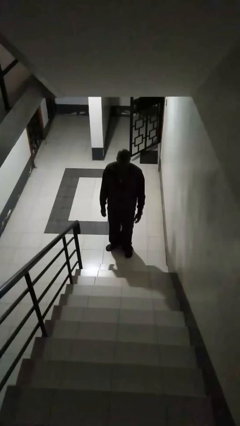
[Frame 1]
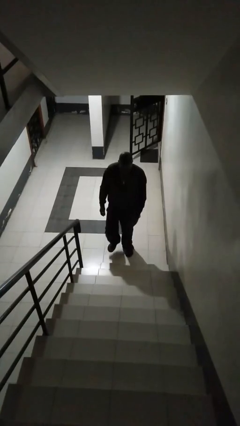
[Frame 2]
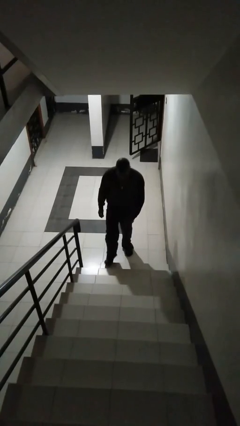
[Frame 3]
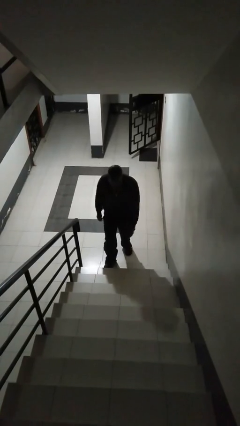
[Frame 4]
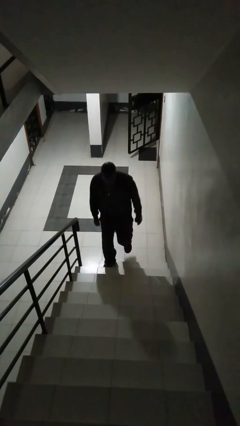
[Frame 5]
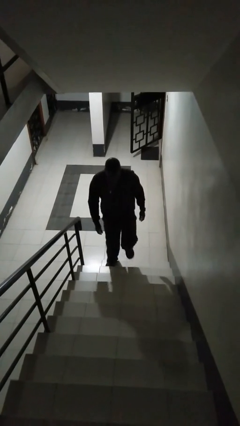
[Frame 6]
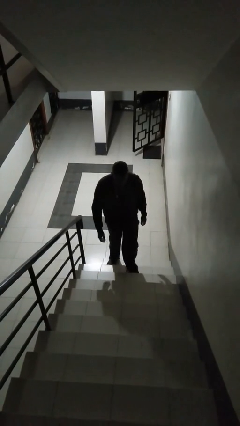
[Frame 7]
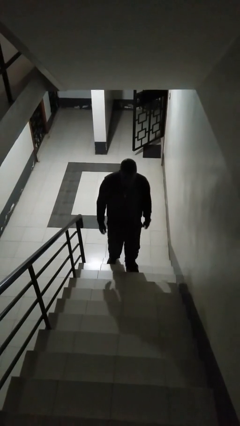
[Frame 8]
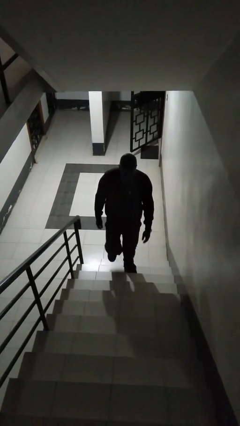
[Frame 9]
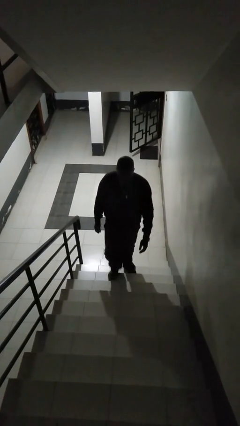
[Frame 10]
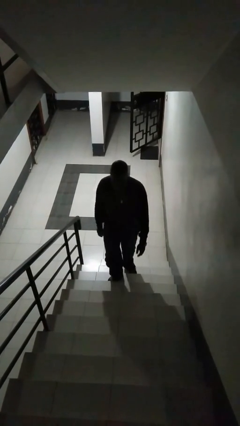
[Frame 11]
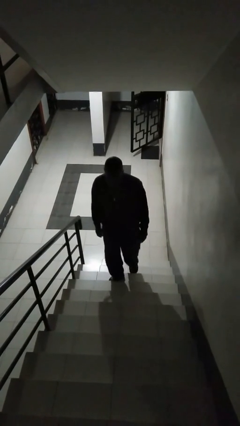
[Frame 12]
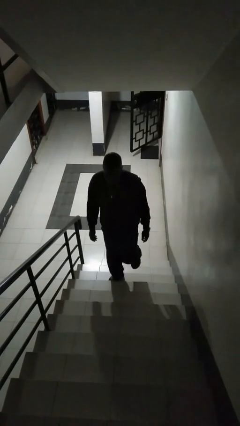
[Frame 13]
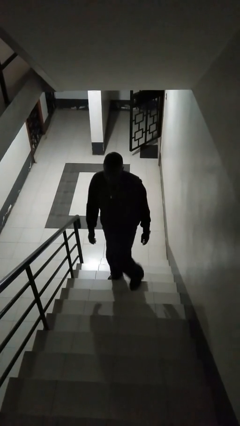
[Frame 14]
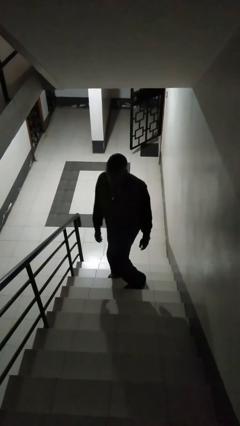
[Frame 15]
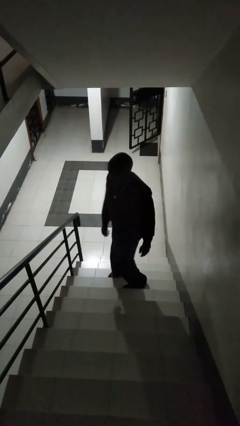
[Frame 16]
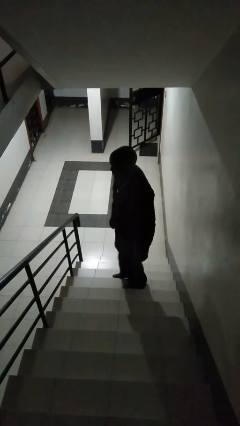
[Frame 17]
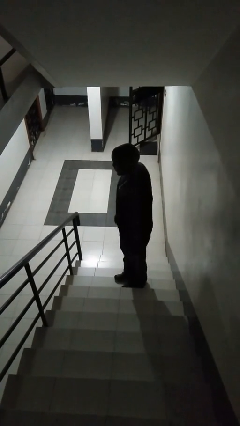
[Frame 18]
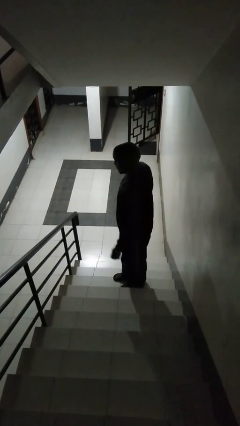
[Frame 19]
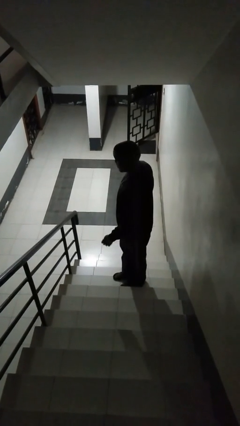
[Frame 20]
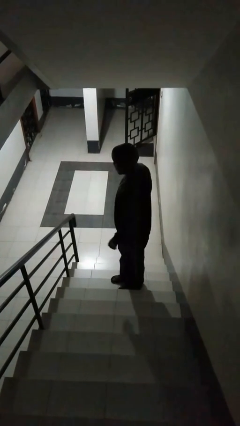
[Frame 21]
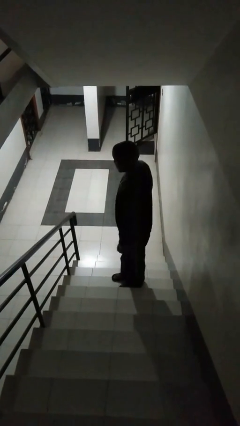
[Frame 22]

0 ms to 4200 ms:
person climbs up stairs
